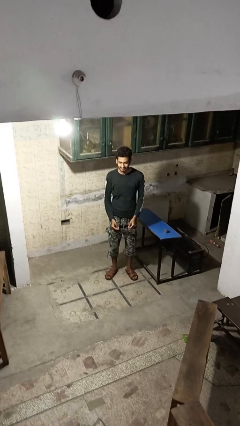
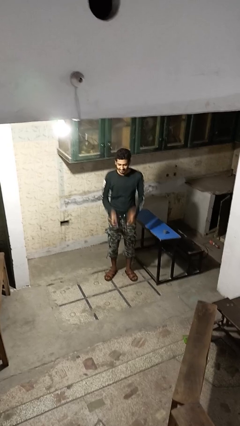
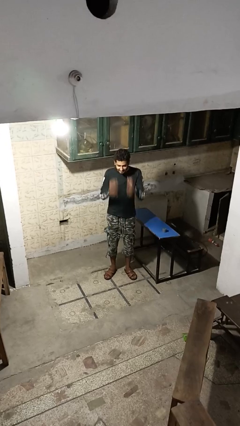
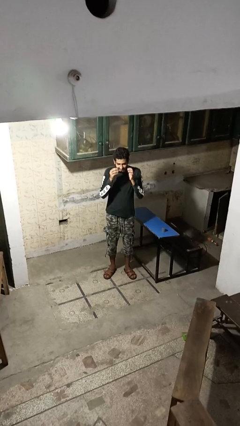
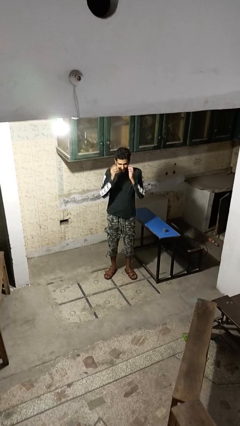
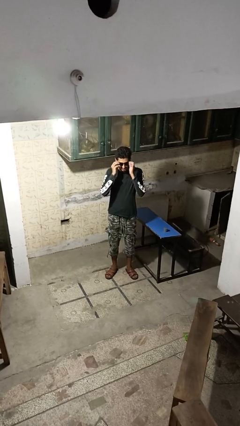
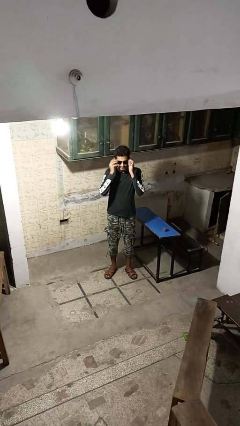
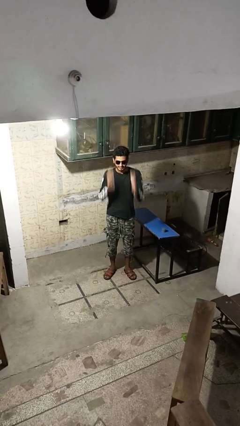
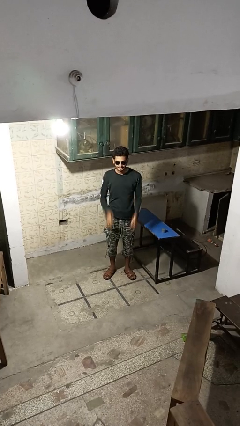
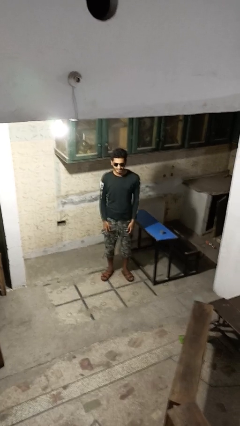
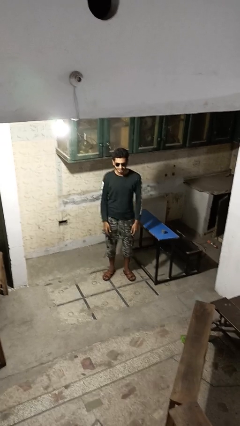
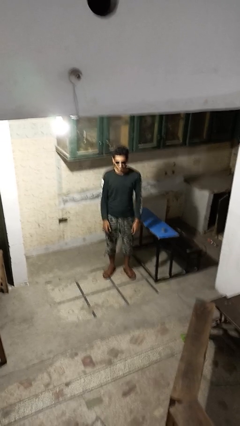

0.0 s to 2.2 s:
person puts on sunglasses

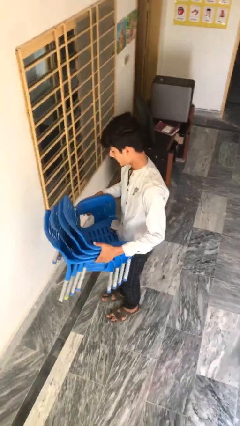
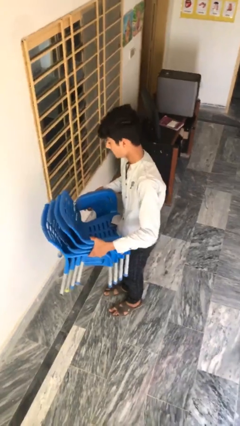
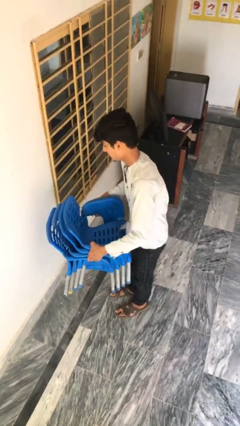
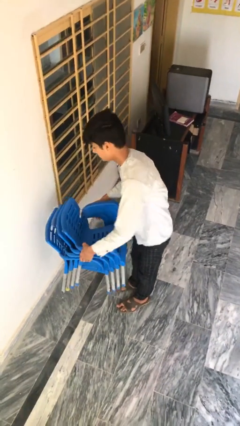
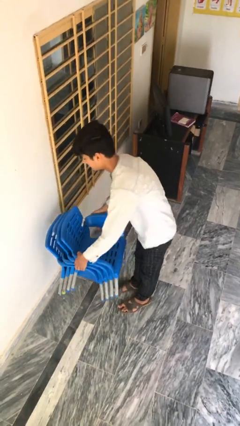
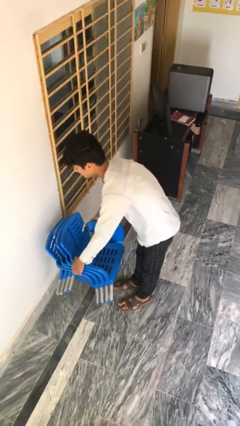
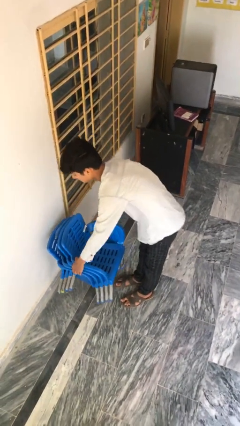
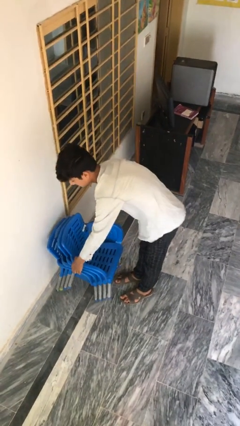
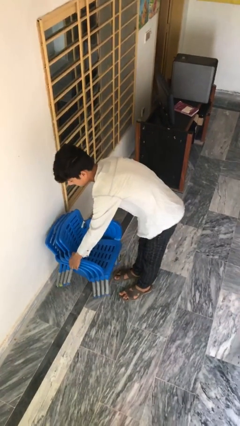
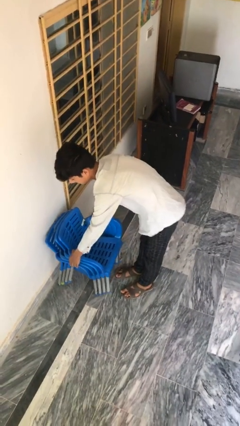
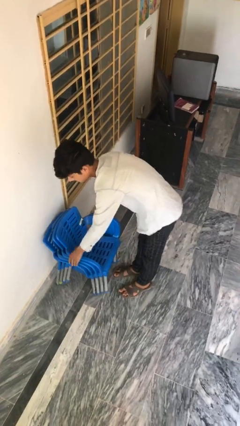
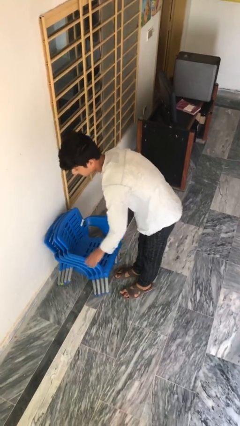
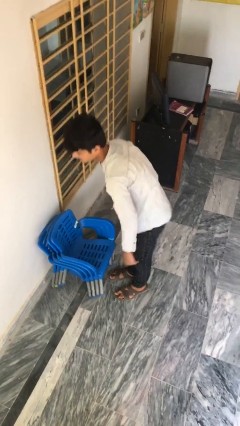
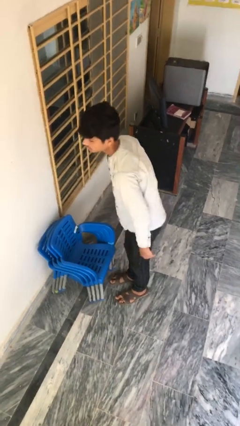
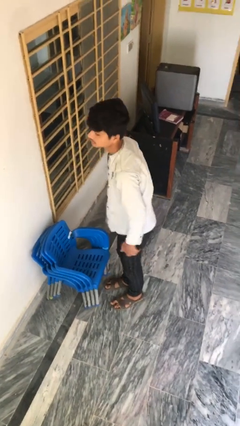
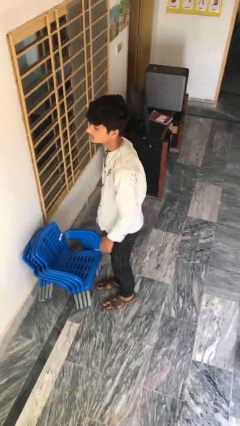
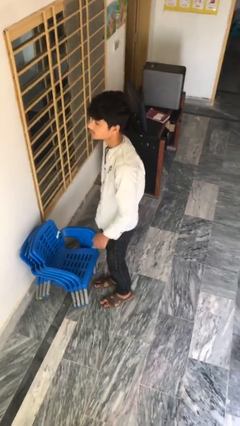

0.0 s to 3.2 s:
person puts down object on floor

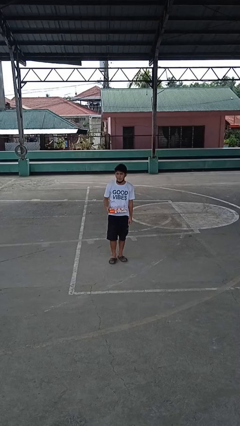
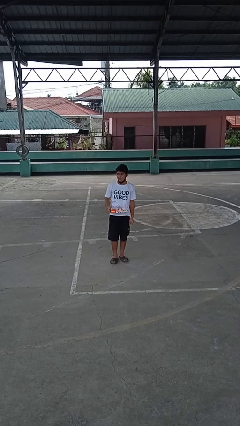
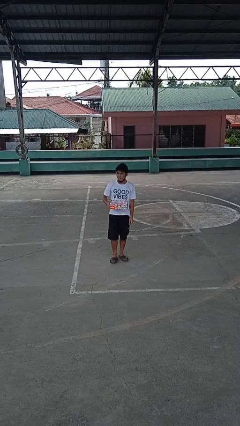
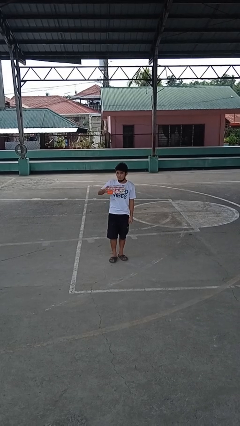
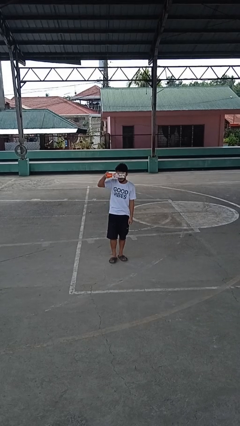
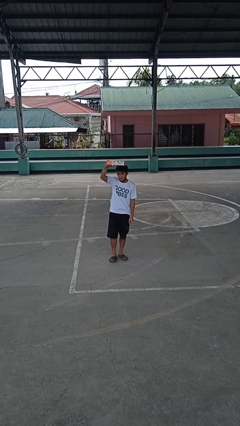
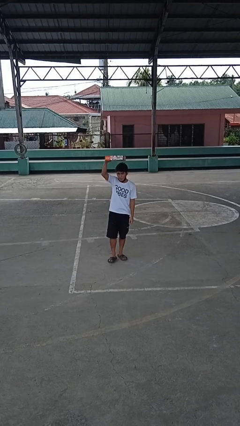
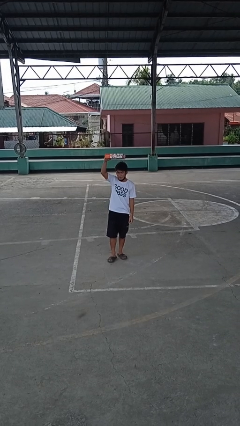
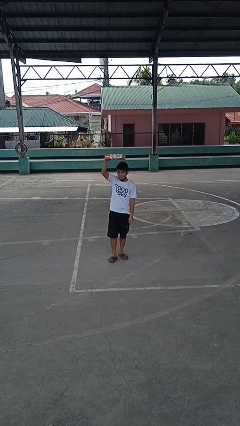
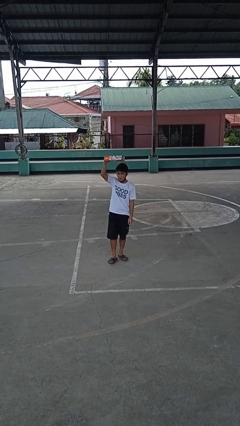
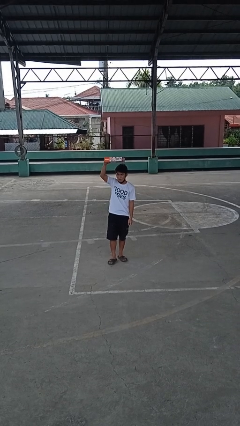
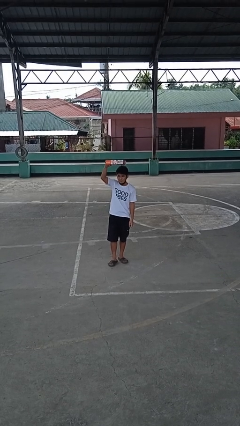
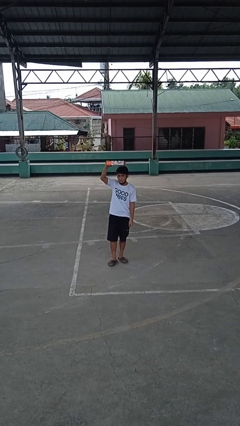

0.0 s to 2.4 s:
person holds object above head

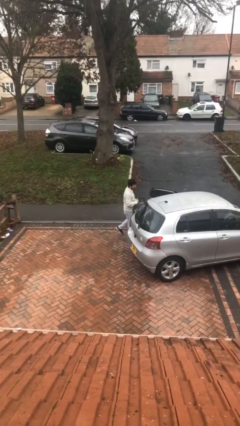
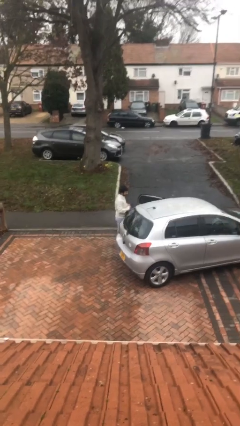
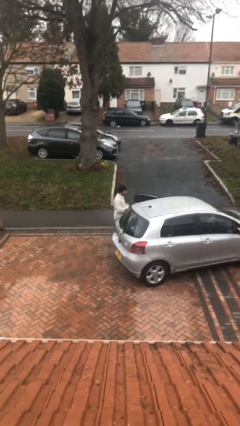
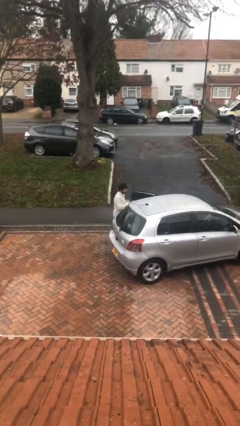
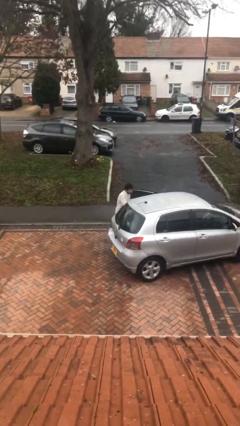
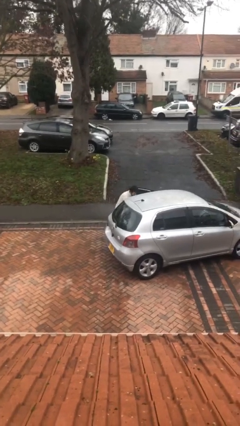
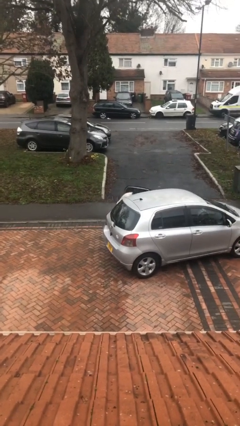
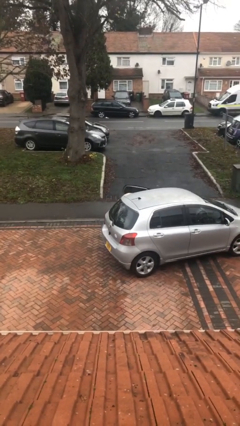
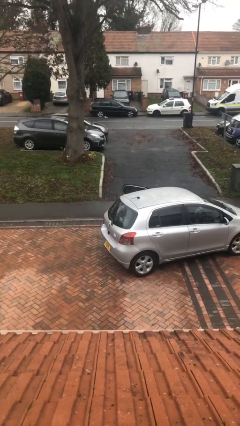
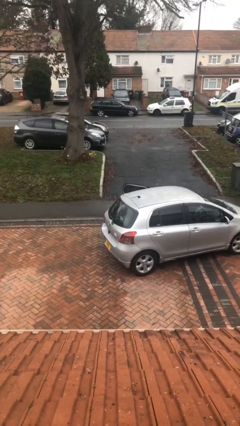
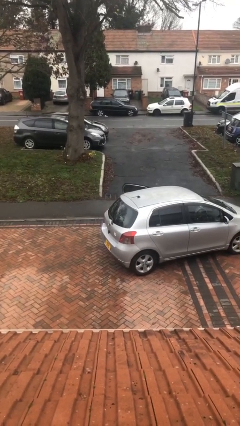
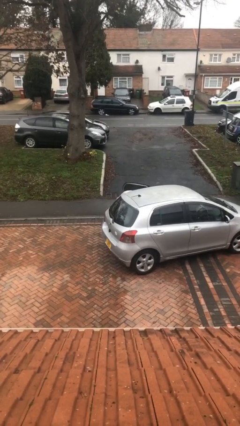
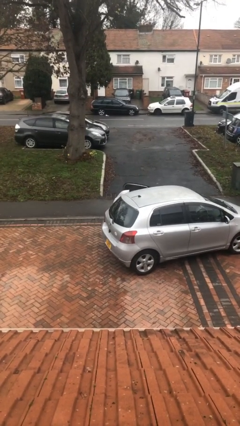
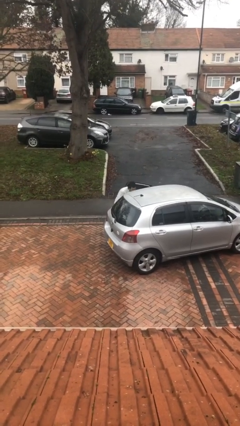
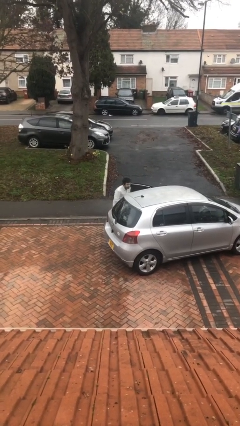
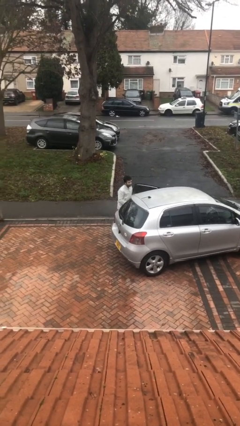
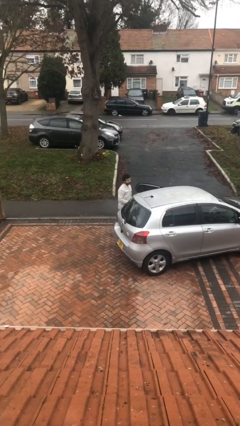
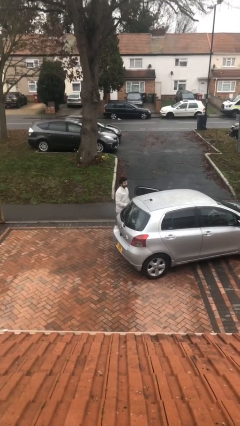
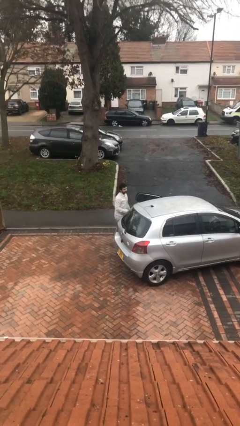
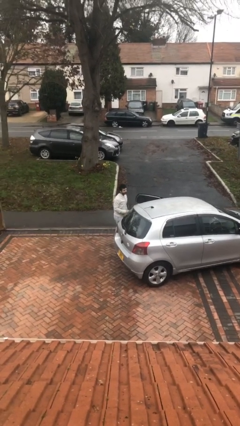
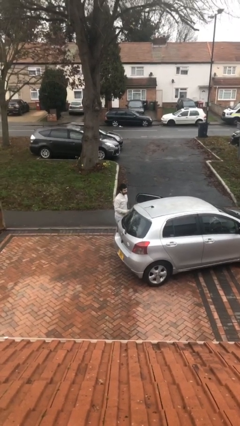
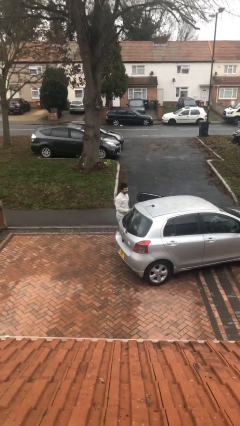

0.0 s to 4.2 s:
person loads car

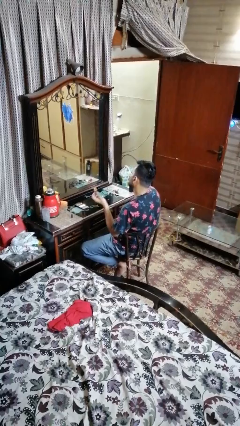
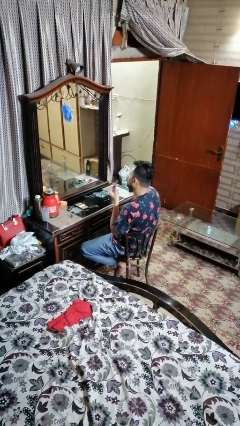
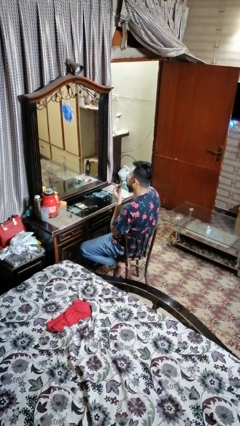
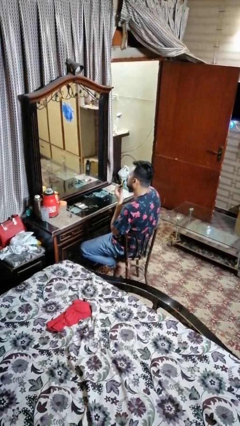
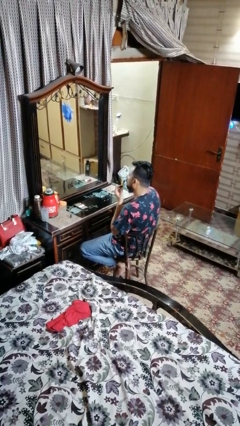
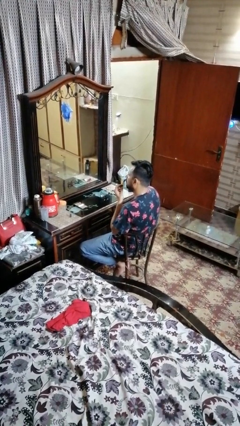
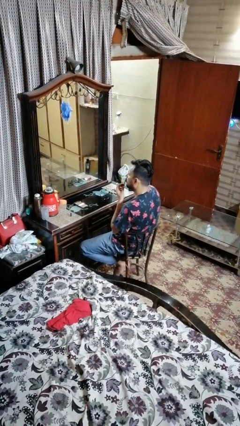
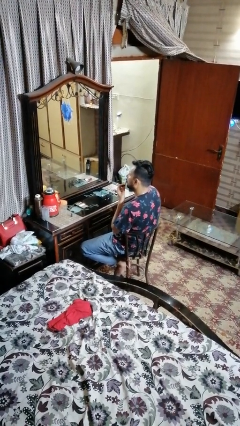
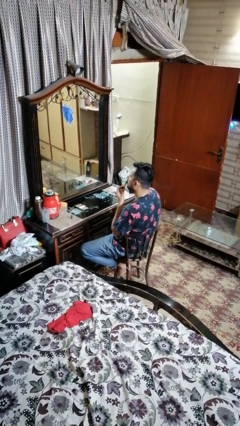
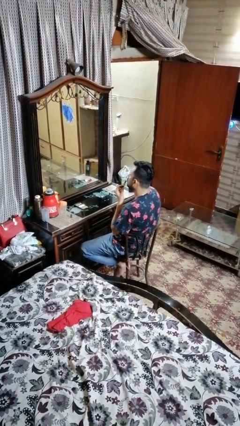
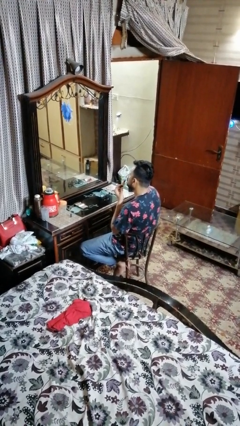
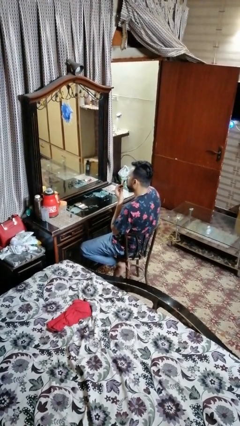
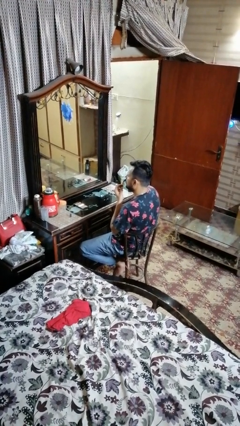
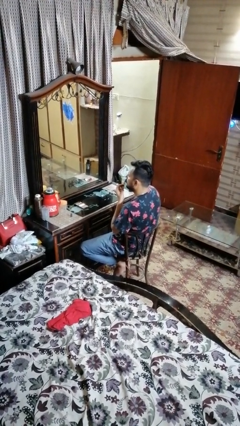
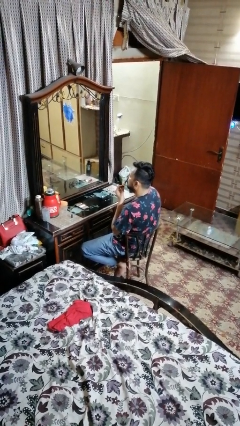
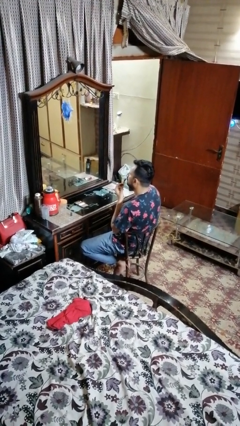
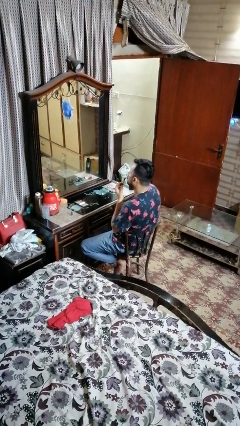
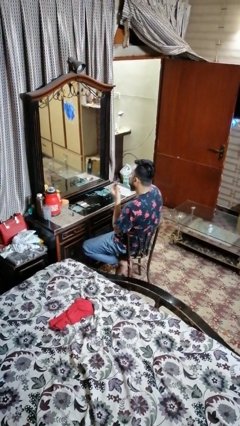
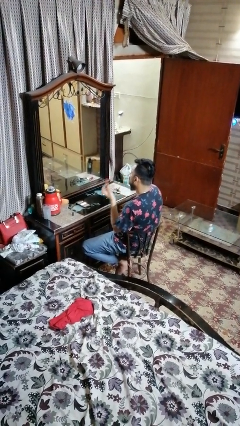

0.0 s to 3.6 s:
person applies lip makeup

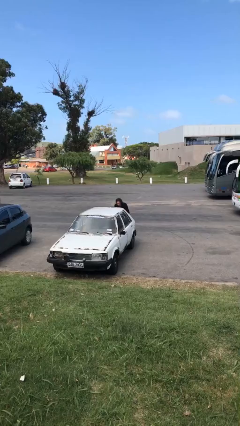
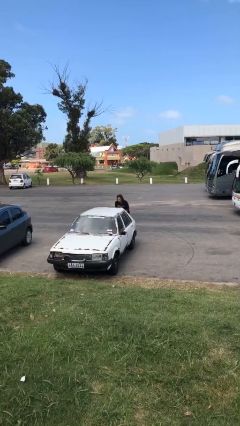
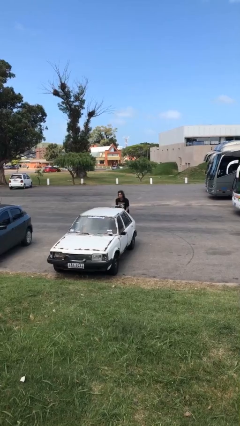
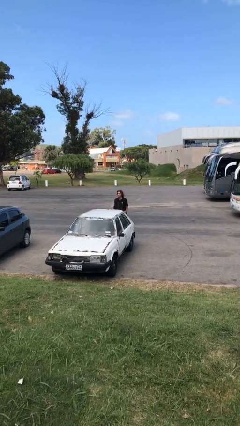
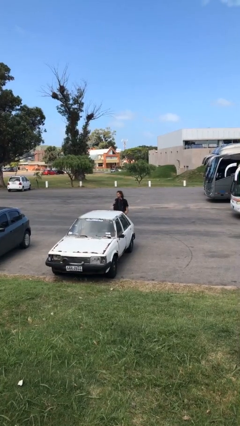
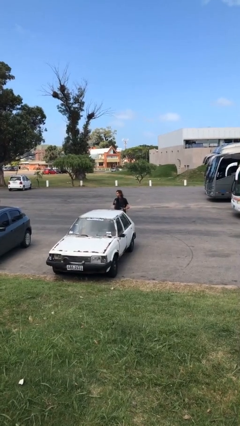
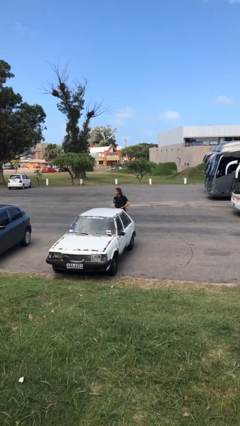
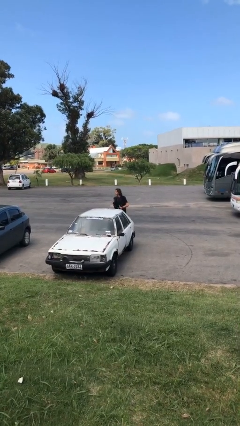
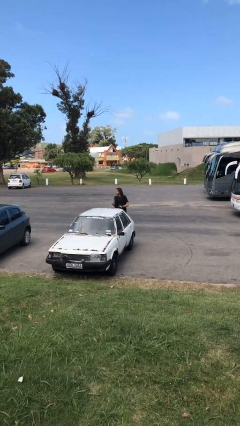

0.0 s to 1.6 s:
person unloads car

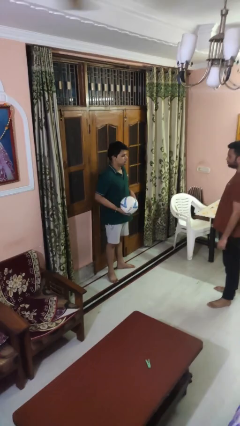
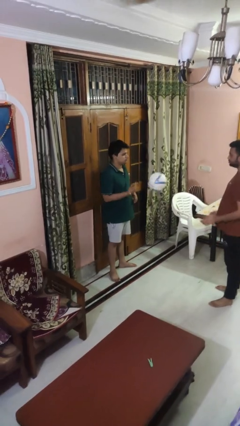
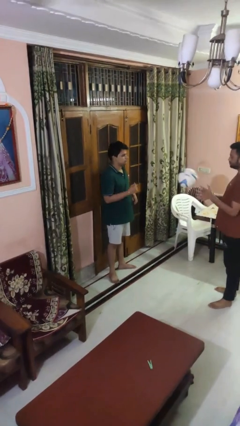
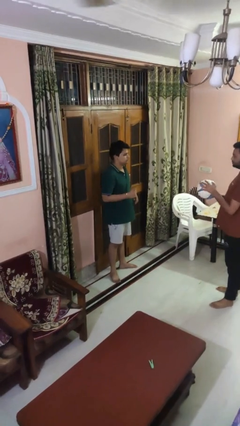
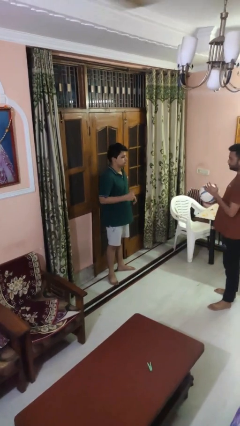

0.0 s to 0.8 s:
person throws object to person
